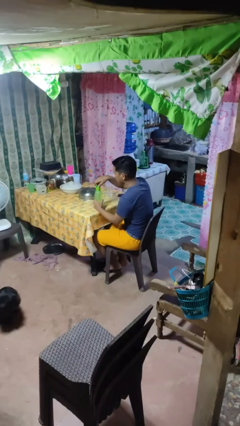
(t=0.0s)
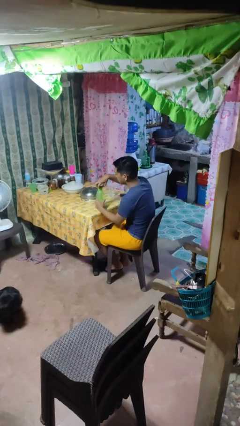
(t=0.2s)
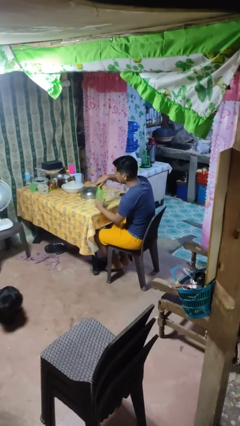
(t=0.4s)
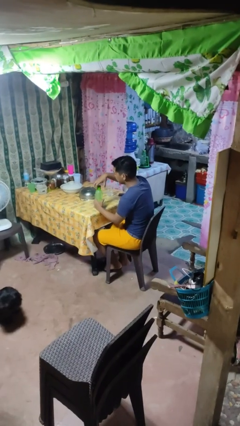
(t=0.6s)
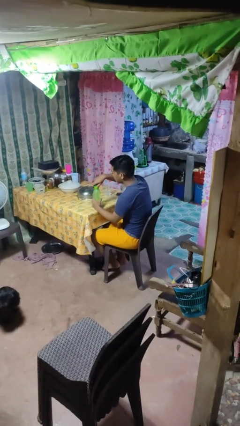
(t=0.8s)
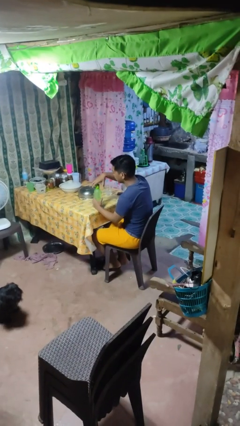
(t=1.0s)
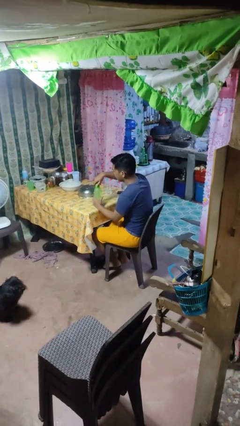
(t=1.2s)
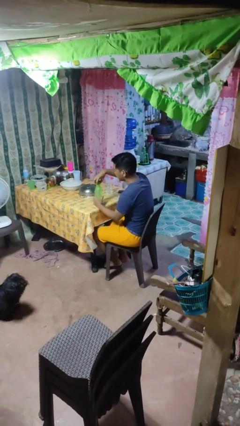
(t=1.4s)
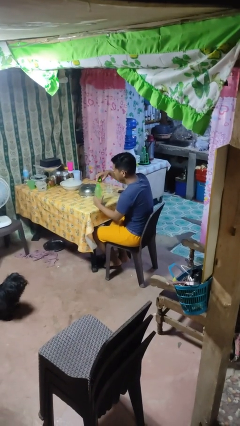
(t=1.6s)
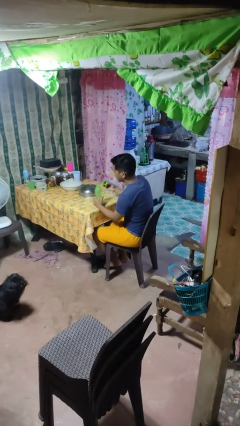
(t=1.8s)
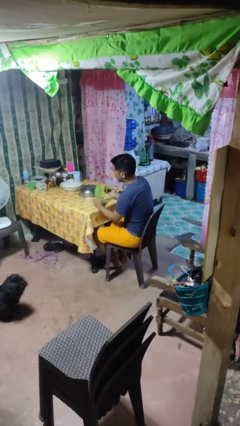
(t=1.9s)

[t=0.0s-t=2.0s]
person unscrews lid from bottle

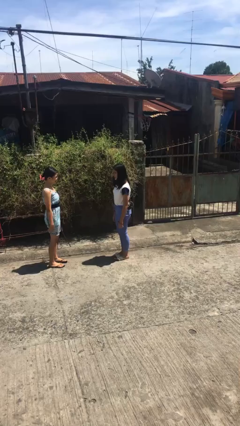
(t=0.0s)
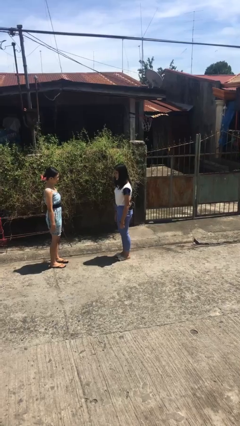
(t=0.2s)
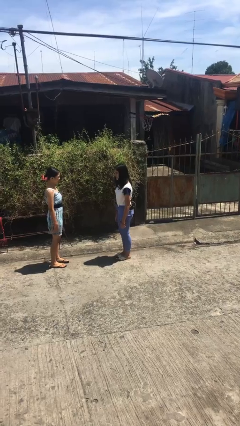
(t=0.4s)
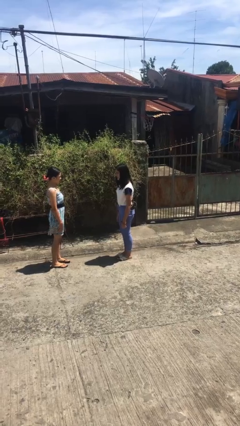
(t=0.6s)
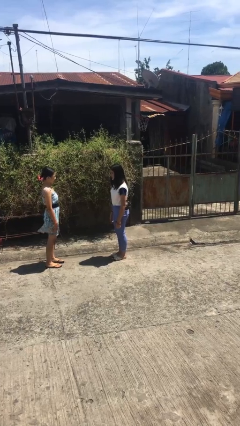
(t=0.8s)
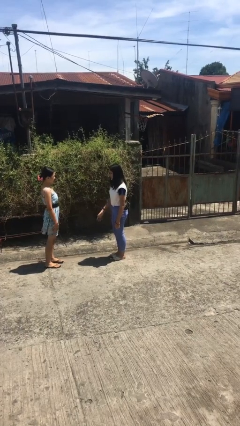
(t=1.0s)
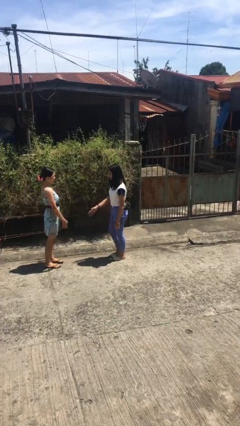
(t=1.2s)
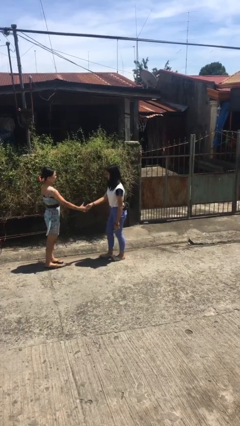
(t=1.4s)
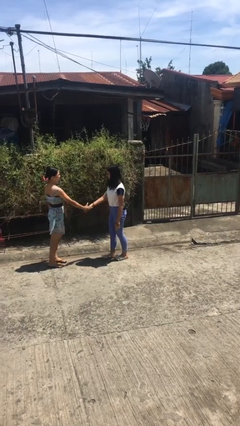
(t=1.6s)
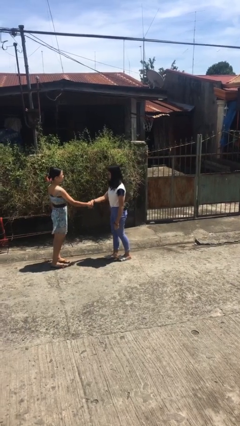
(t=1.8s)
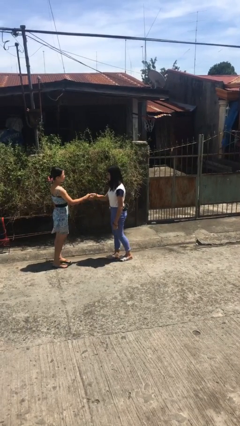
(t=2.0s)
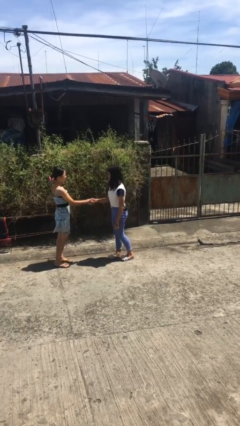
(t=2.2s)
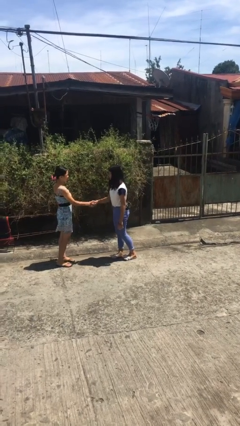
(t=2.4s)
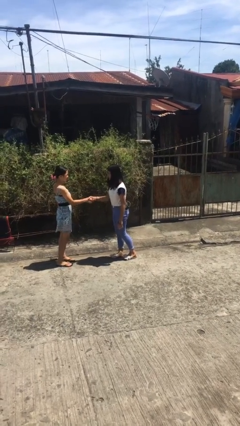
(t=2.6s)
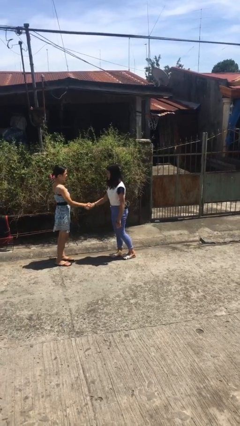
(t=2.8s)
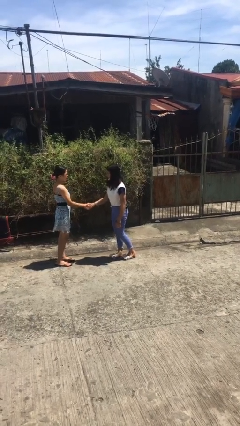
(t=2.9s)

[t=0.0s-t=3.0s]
person shakes hand

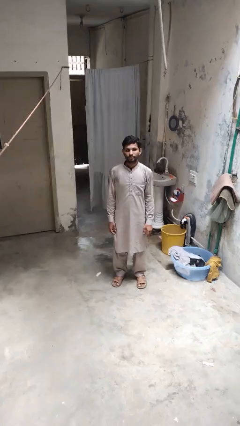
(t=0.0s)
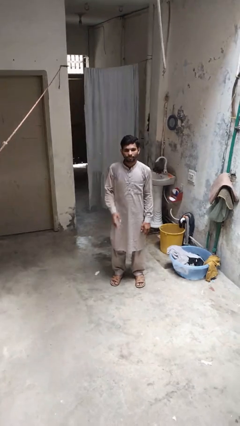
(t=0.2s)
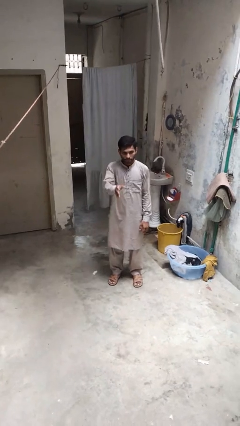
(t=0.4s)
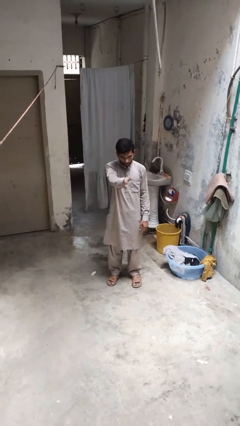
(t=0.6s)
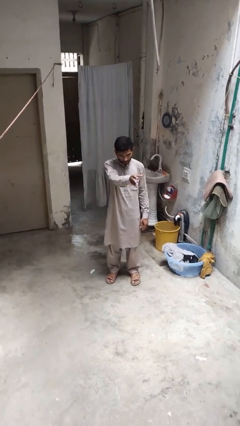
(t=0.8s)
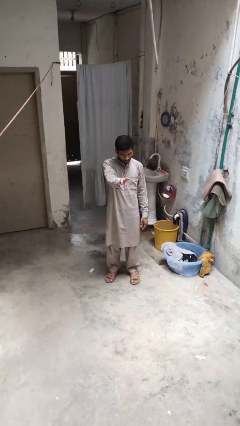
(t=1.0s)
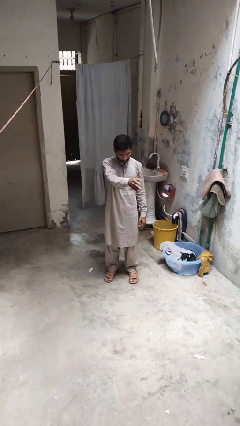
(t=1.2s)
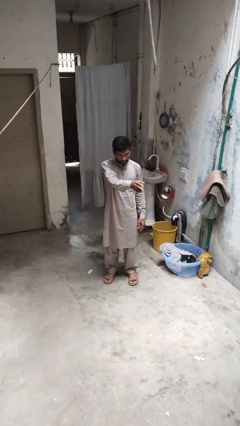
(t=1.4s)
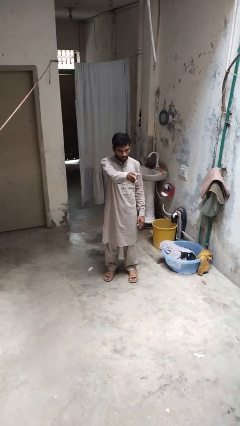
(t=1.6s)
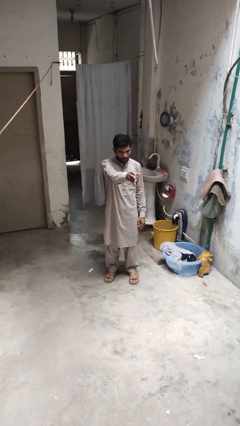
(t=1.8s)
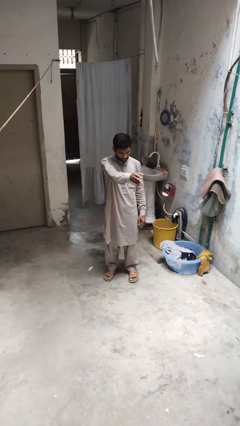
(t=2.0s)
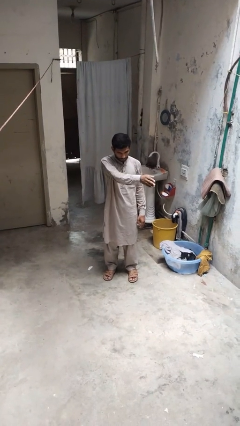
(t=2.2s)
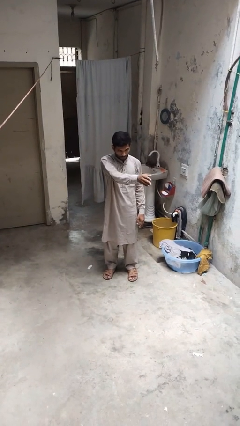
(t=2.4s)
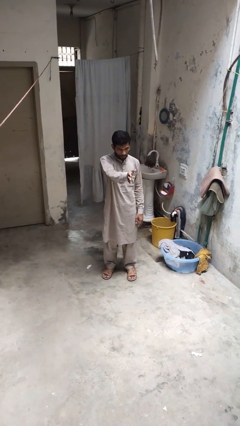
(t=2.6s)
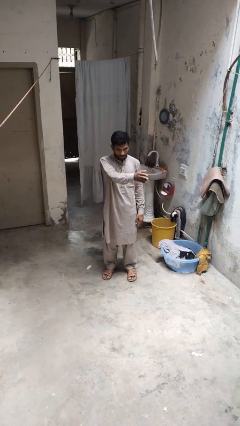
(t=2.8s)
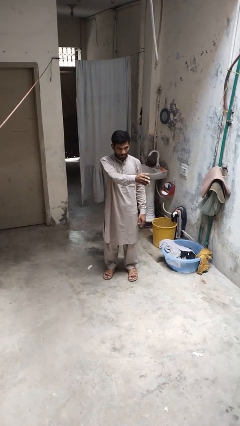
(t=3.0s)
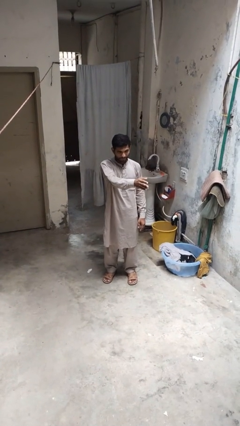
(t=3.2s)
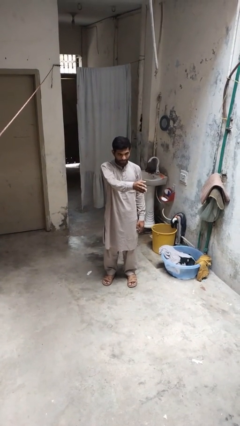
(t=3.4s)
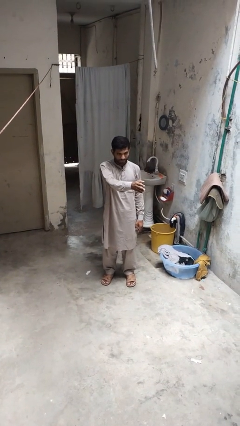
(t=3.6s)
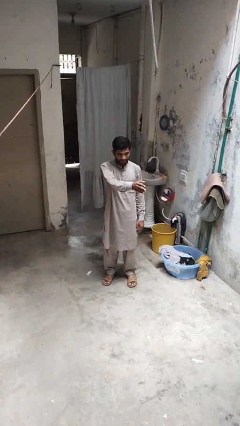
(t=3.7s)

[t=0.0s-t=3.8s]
person gestures swipe left

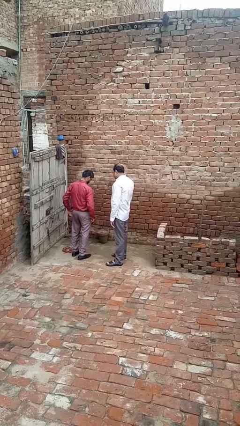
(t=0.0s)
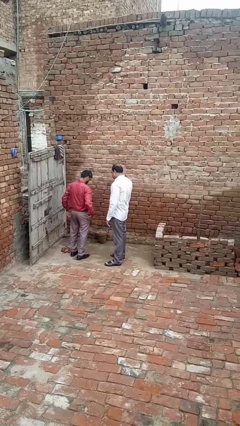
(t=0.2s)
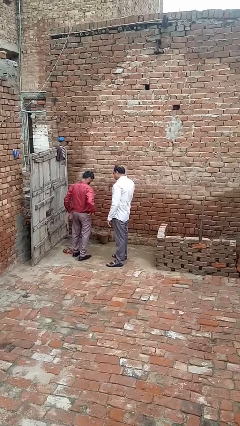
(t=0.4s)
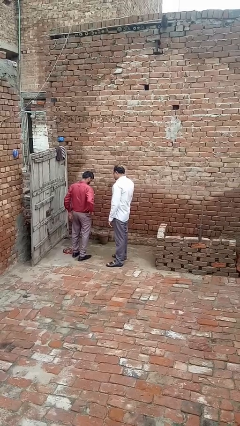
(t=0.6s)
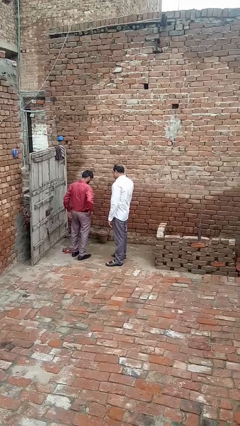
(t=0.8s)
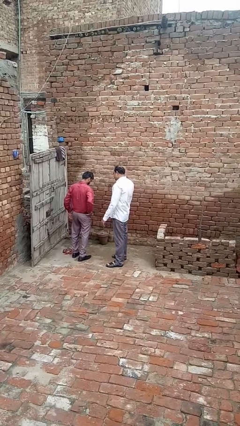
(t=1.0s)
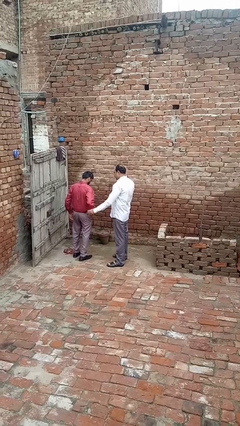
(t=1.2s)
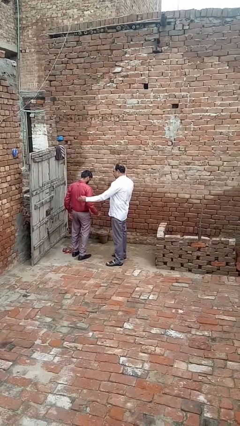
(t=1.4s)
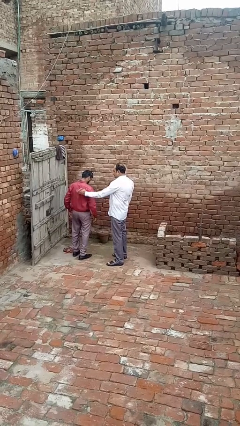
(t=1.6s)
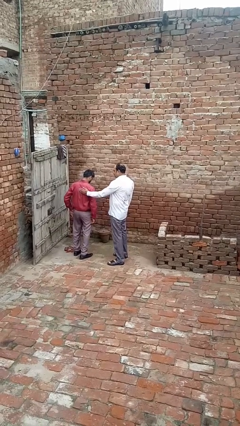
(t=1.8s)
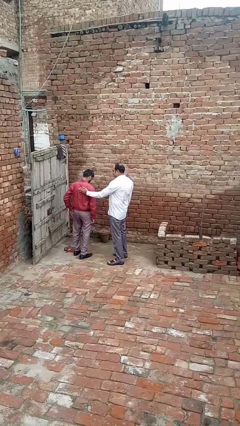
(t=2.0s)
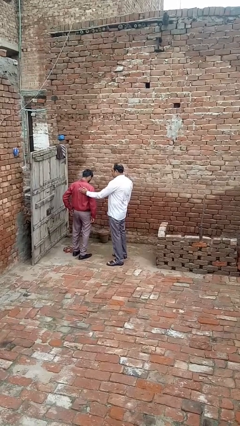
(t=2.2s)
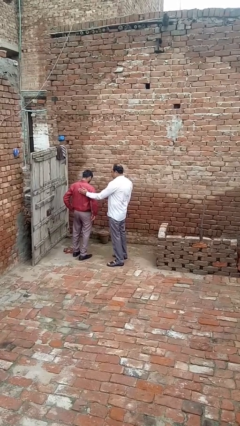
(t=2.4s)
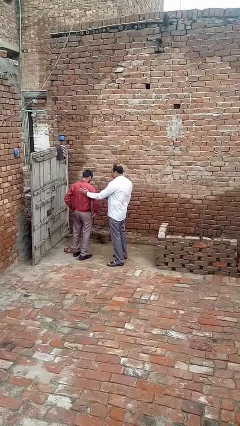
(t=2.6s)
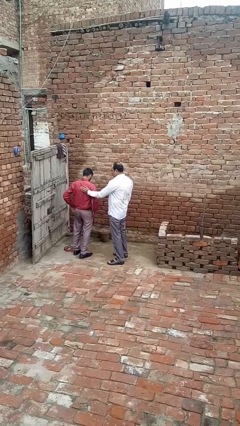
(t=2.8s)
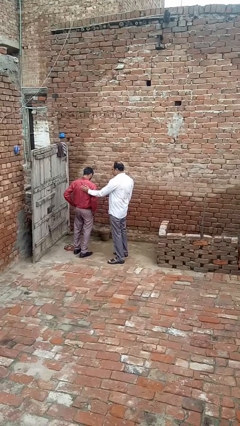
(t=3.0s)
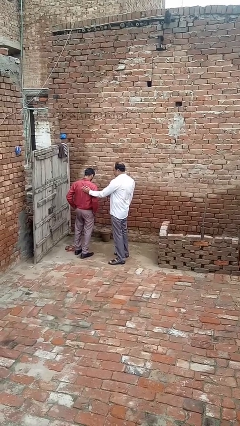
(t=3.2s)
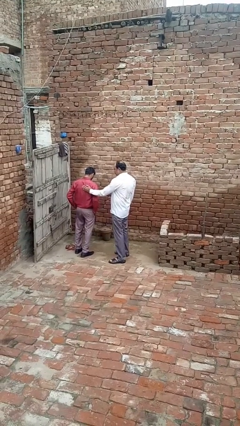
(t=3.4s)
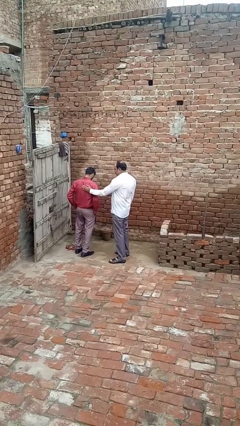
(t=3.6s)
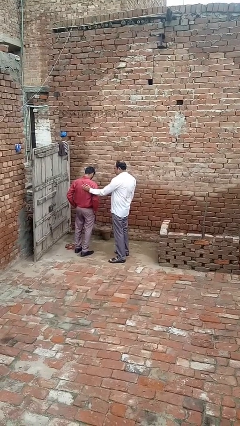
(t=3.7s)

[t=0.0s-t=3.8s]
person touches back of person

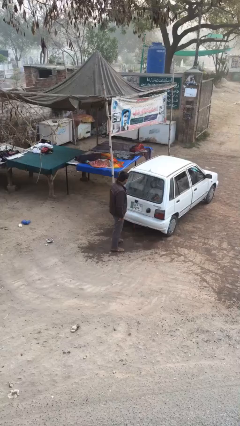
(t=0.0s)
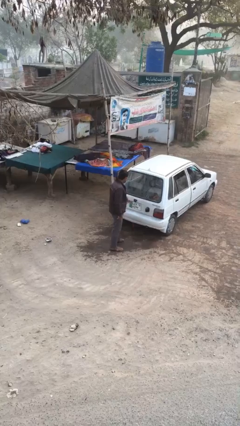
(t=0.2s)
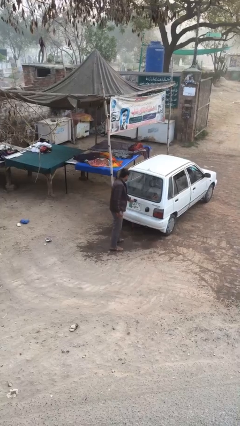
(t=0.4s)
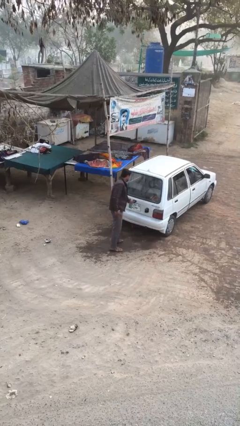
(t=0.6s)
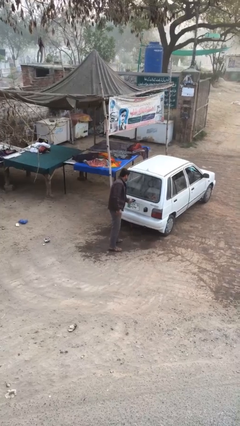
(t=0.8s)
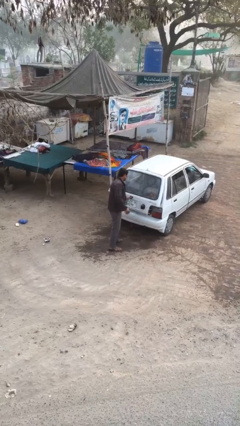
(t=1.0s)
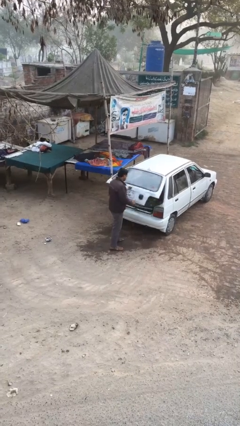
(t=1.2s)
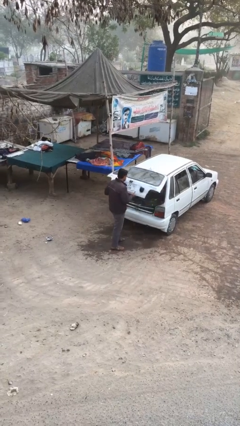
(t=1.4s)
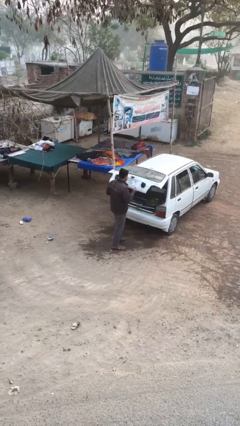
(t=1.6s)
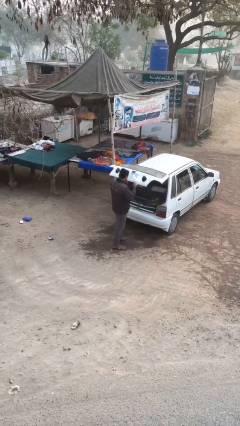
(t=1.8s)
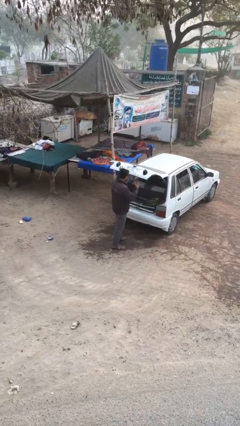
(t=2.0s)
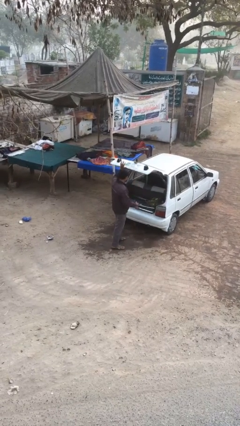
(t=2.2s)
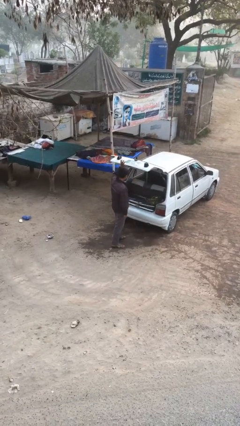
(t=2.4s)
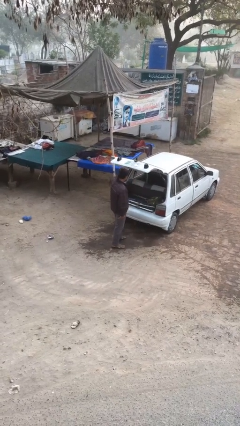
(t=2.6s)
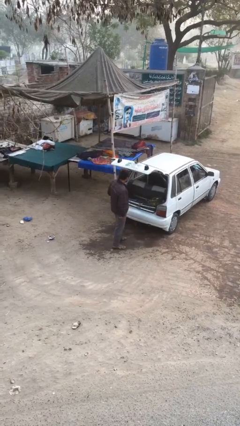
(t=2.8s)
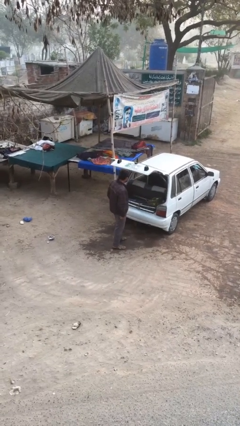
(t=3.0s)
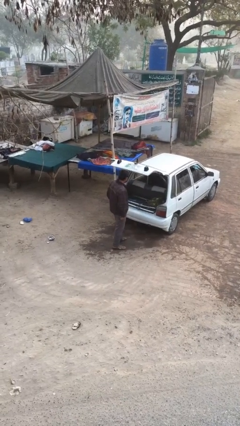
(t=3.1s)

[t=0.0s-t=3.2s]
person opens car trunk

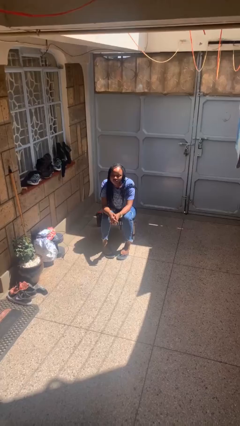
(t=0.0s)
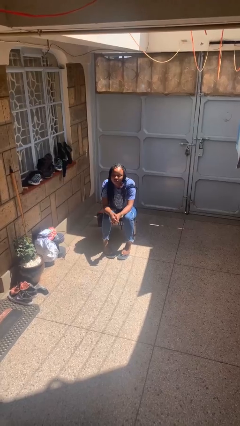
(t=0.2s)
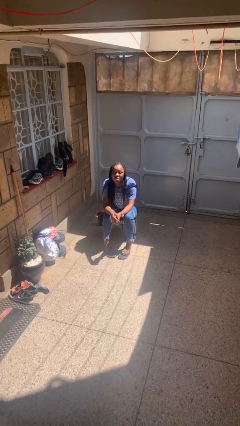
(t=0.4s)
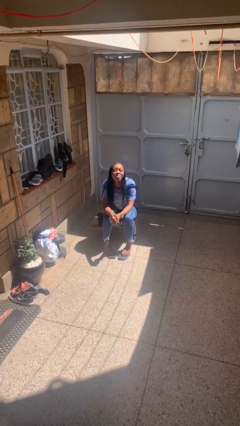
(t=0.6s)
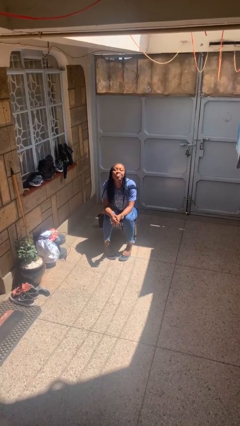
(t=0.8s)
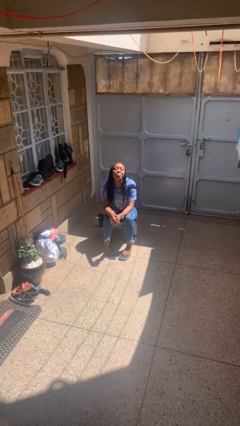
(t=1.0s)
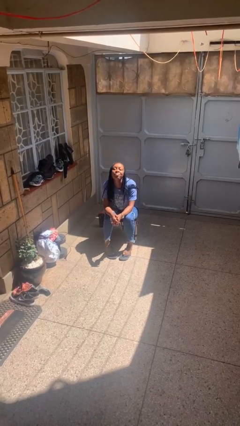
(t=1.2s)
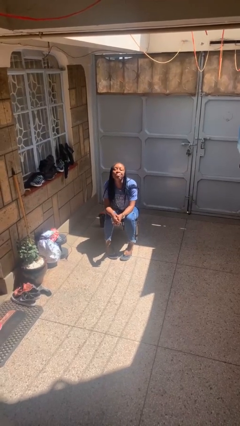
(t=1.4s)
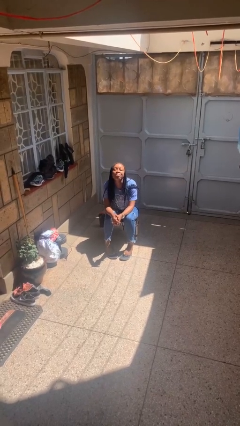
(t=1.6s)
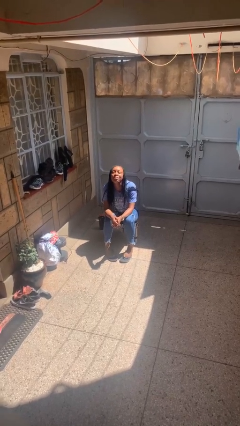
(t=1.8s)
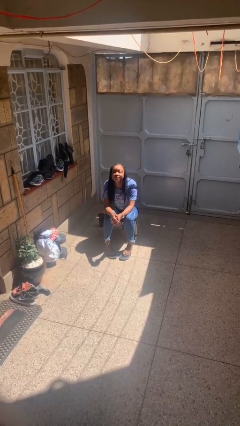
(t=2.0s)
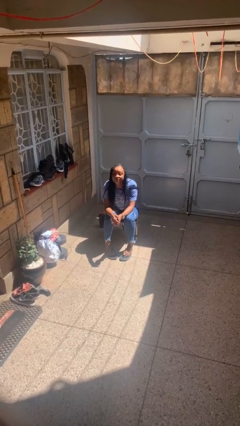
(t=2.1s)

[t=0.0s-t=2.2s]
person sticks out tongue
